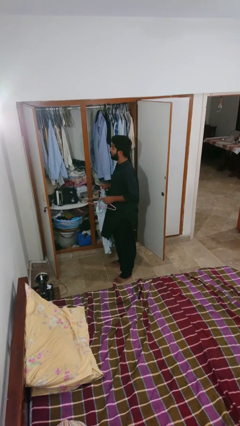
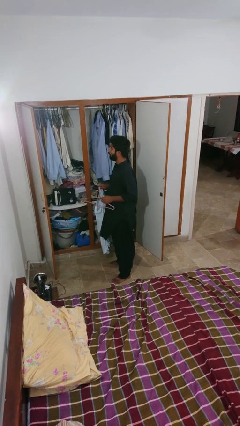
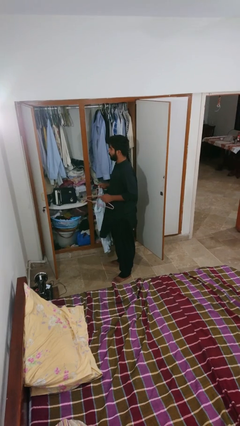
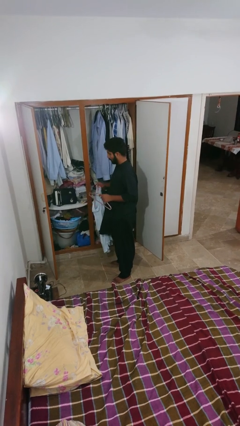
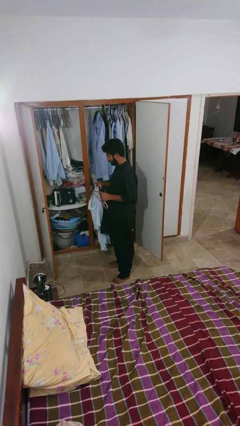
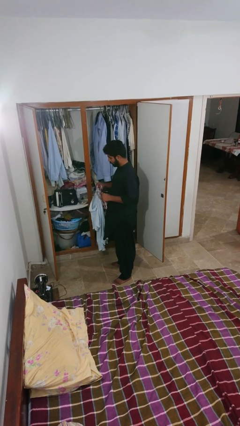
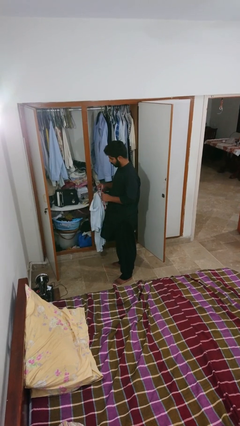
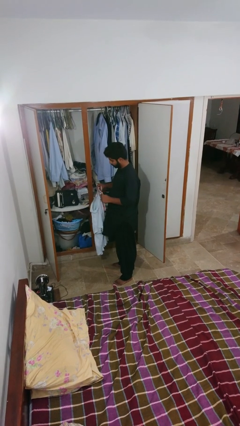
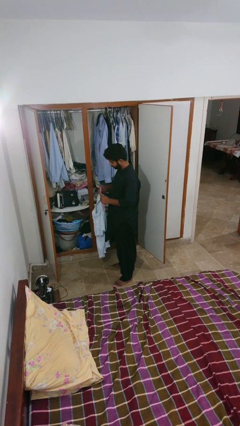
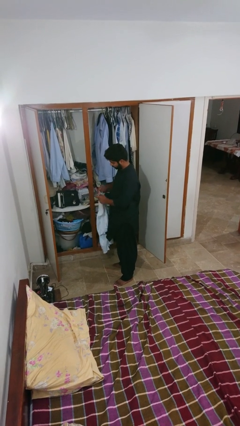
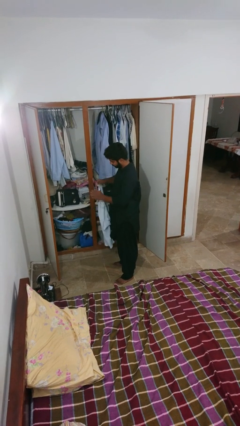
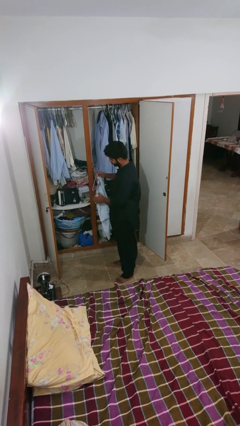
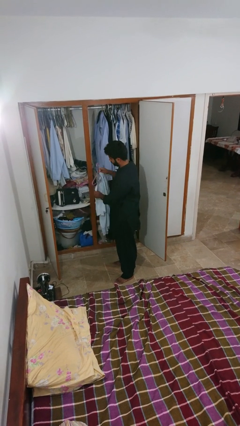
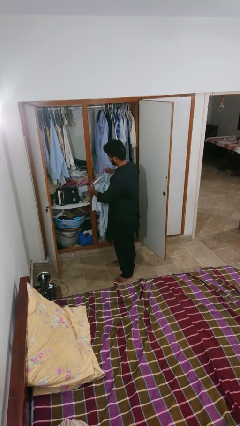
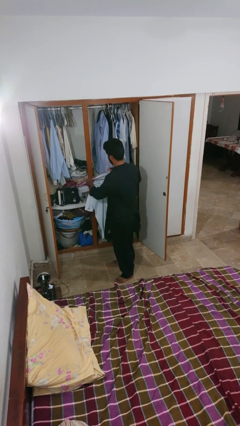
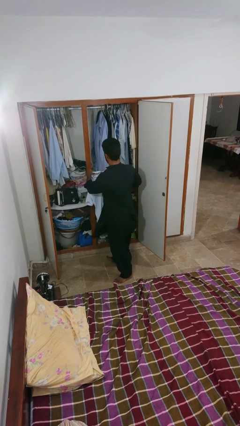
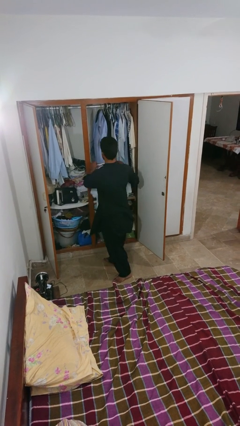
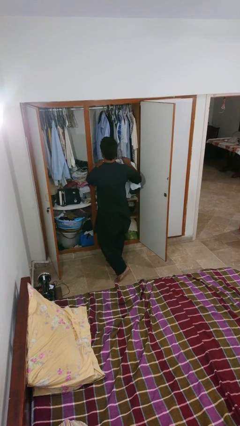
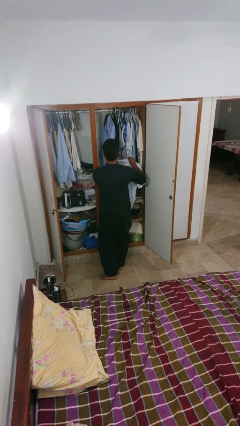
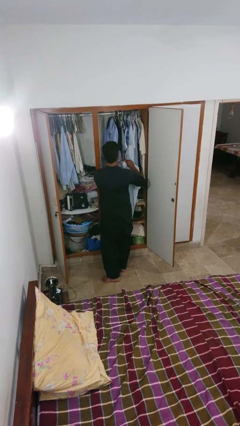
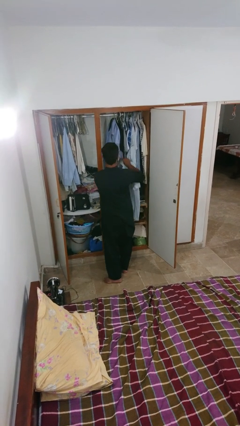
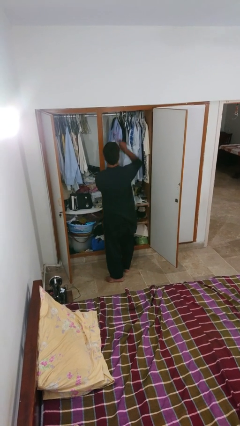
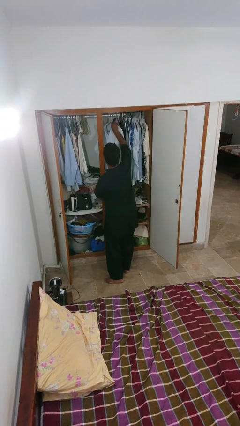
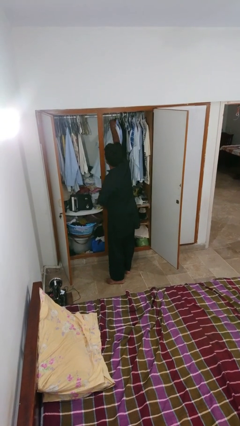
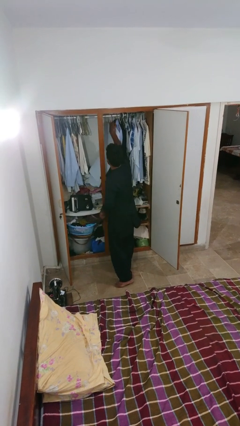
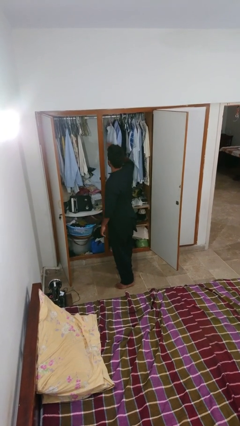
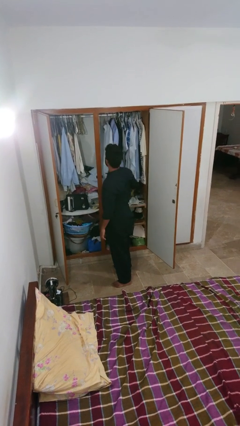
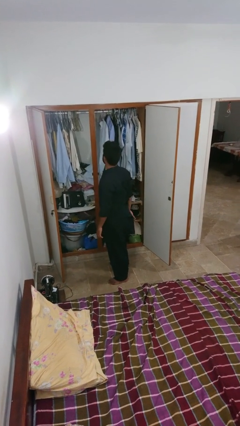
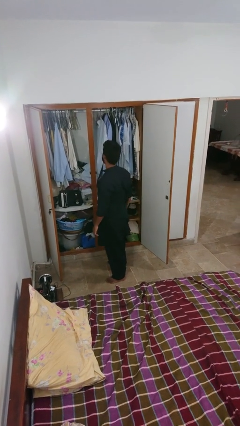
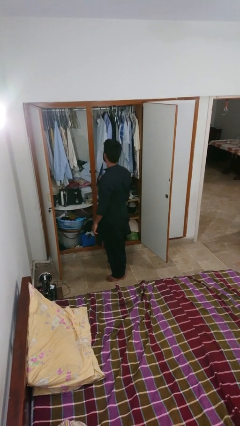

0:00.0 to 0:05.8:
person puts clothes into closet

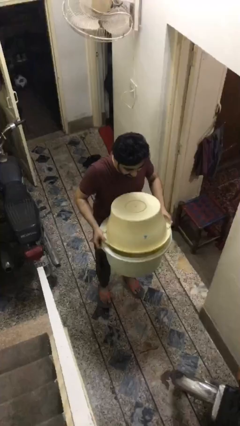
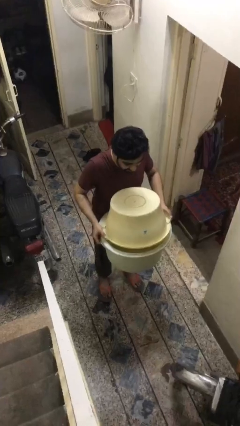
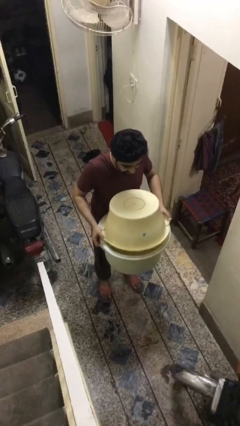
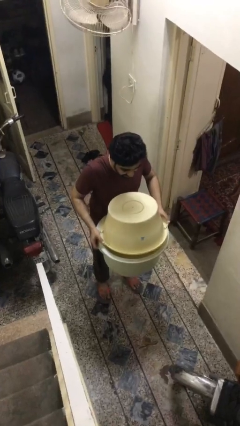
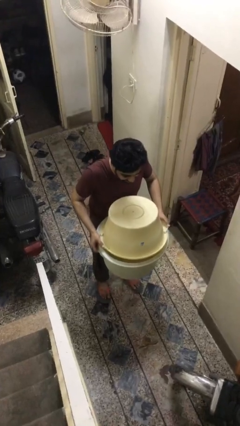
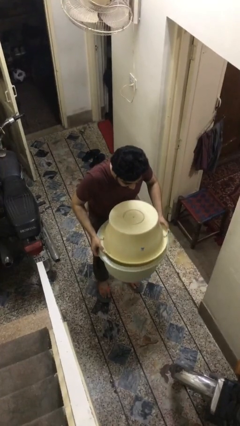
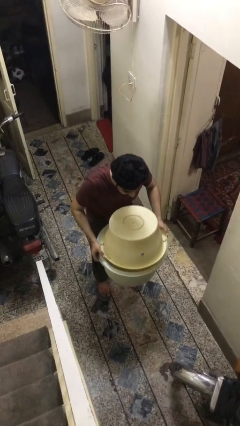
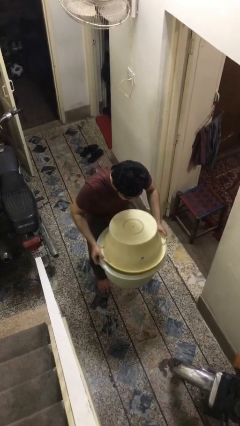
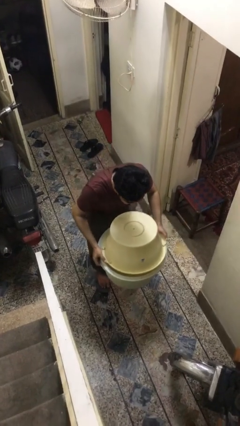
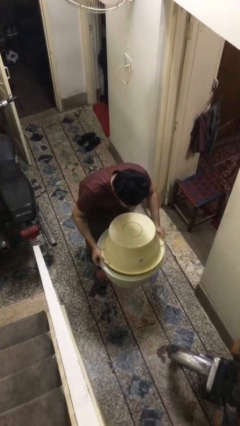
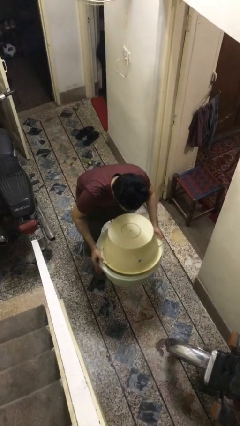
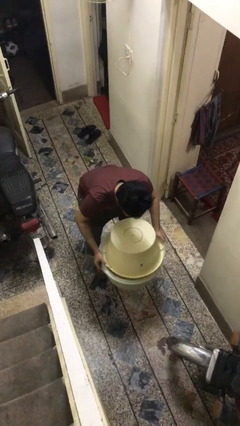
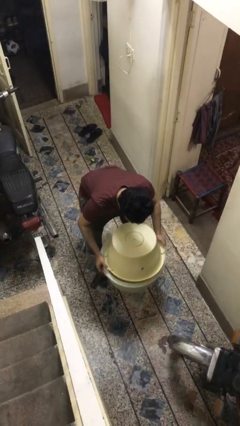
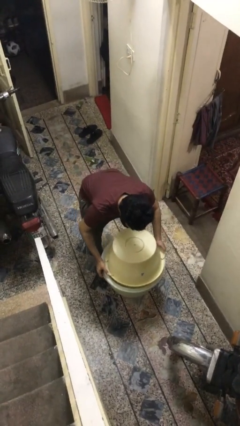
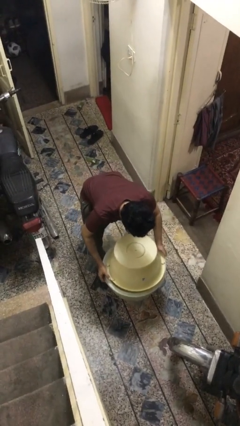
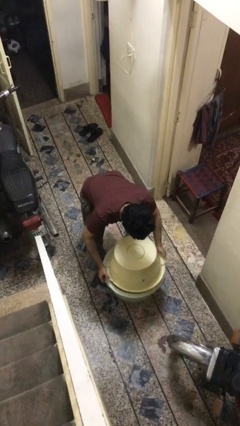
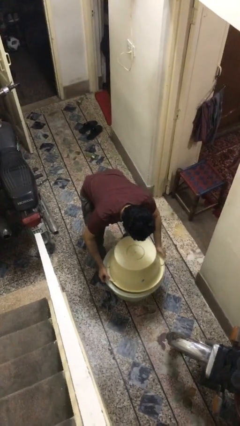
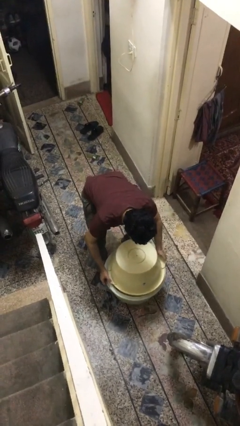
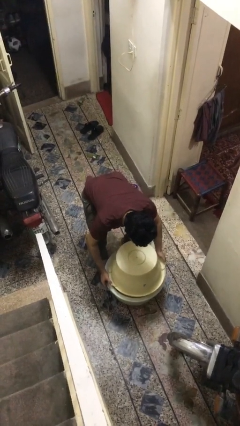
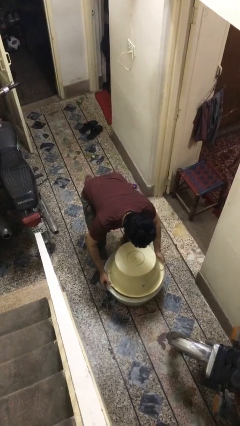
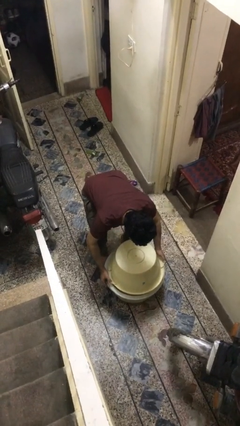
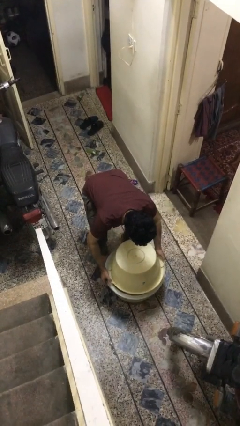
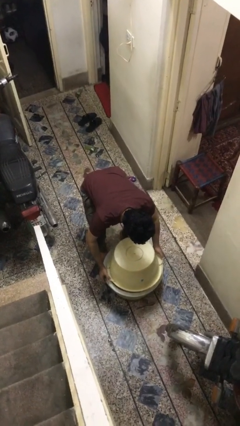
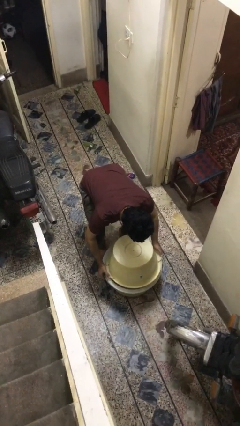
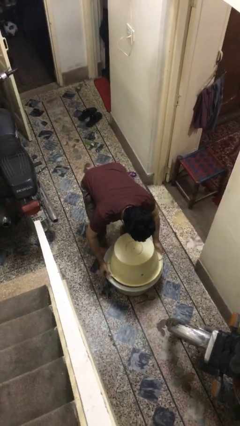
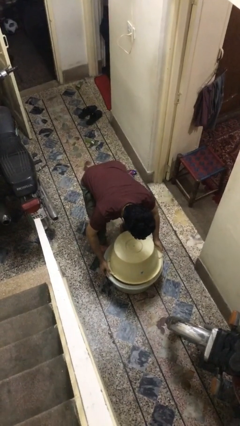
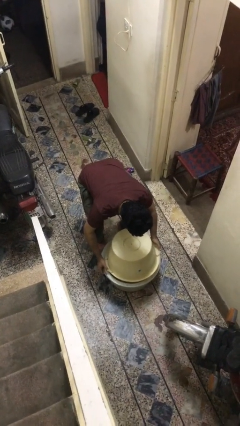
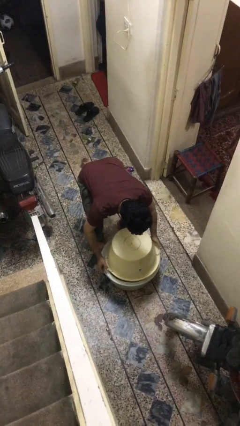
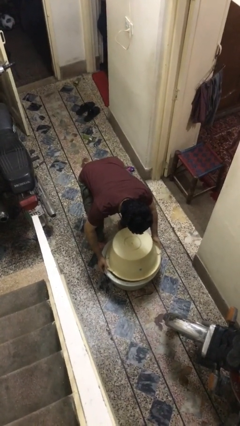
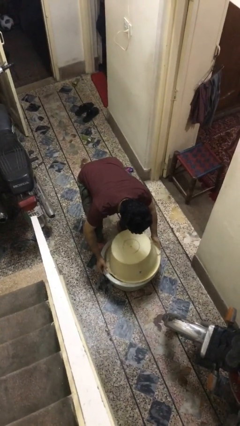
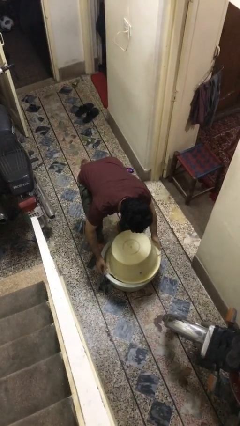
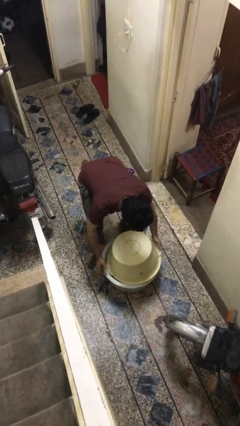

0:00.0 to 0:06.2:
person puts down object on floor

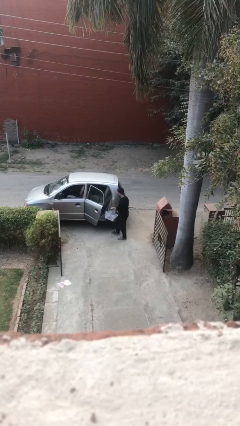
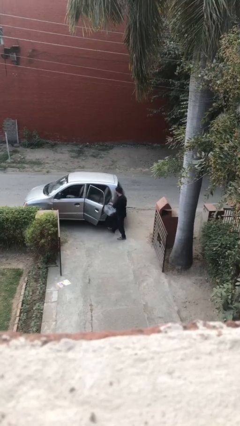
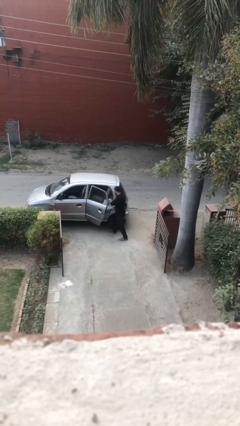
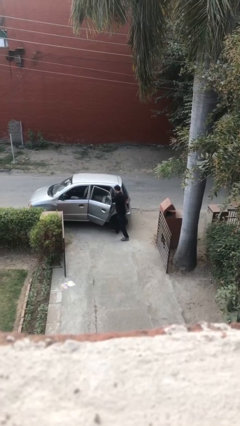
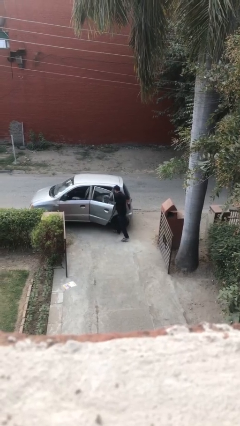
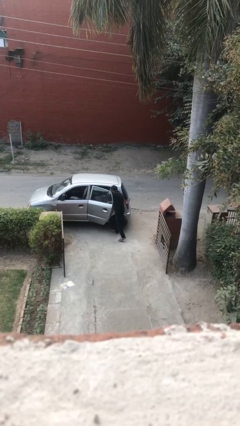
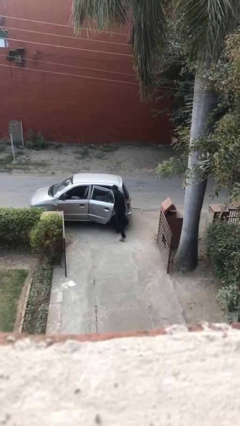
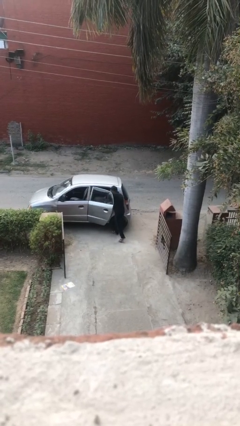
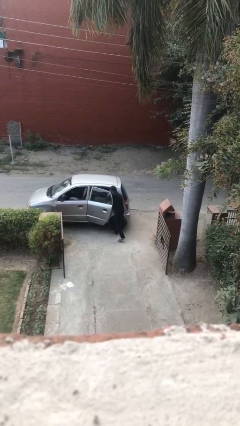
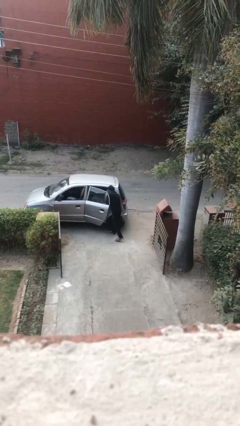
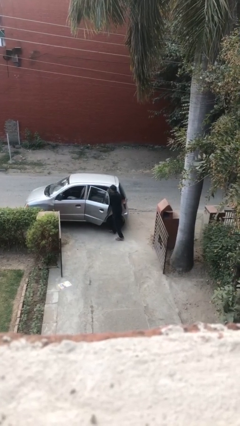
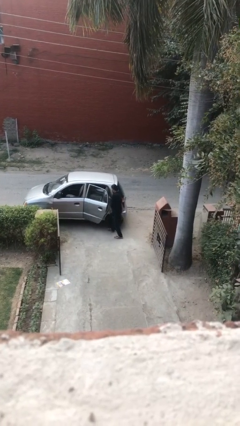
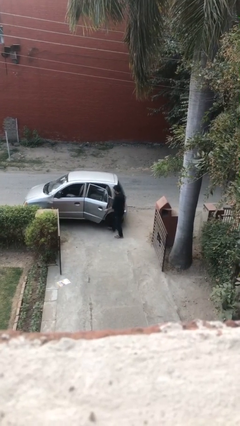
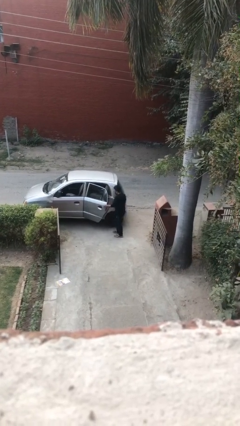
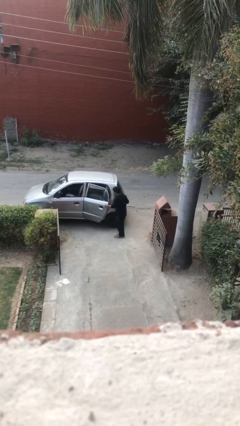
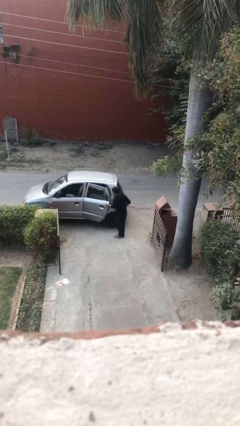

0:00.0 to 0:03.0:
person loads car

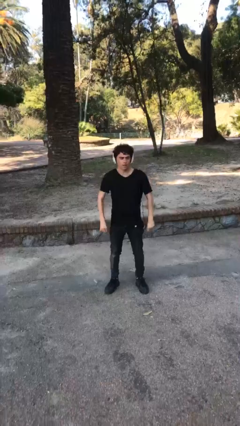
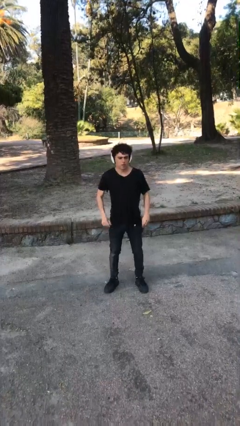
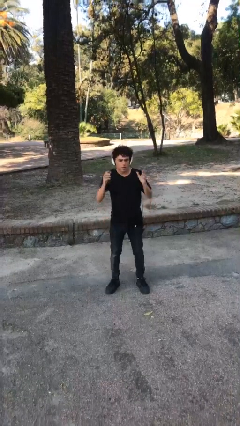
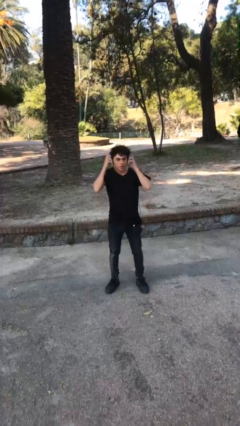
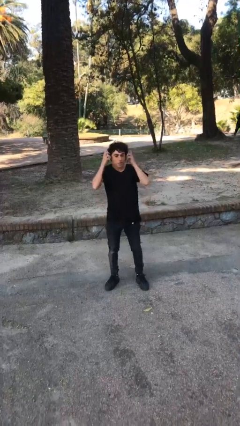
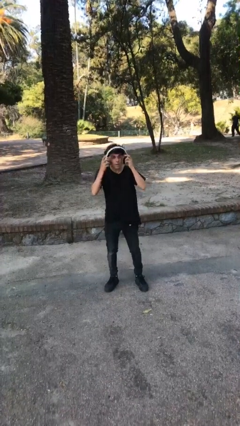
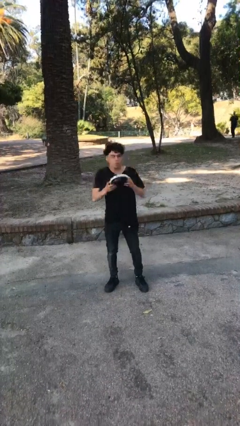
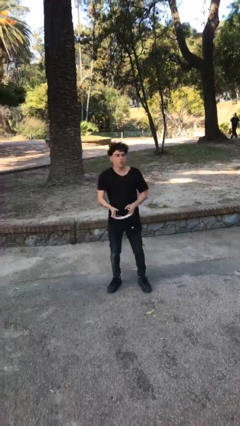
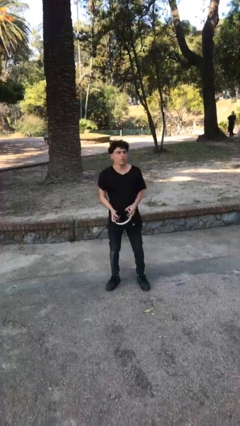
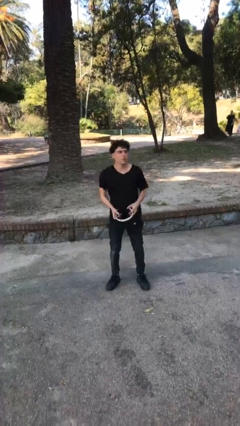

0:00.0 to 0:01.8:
person takes off headphones

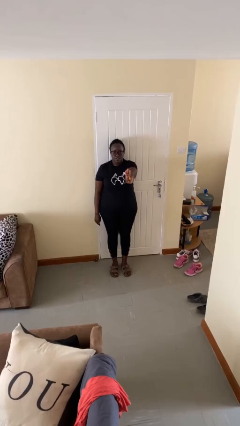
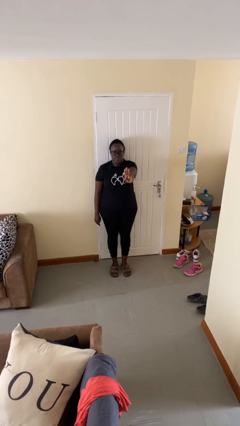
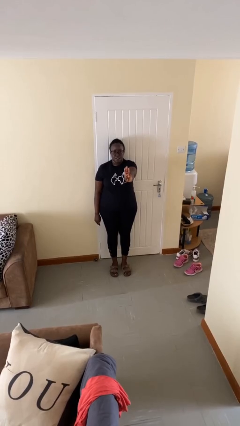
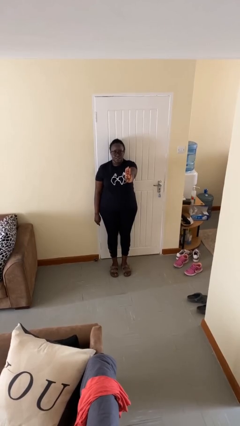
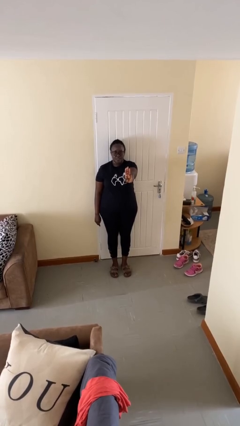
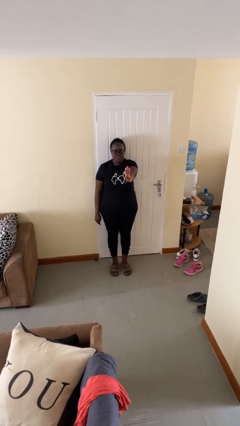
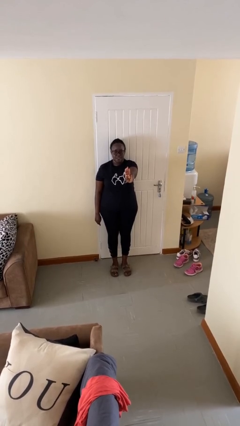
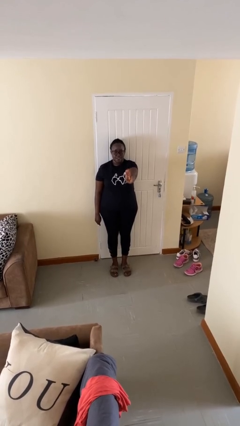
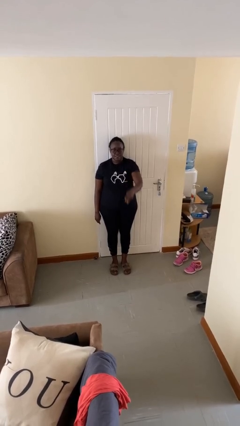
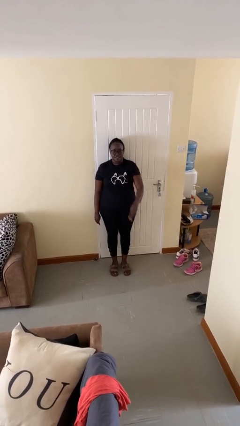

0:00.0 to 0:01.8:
person gestures number three
